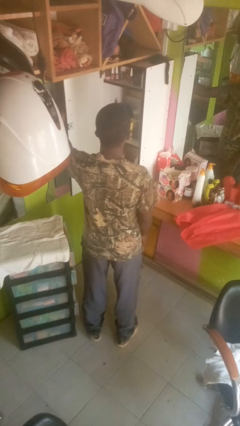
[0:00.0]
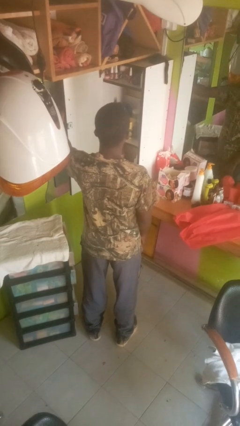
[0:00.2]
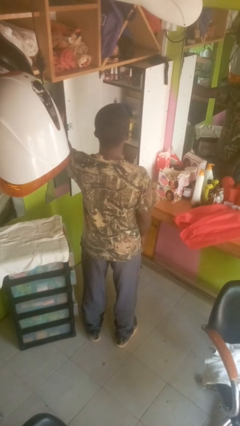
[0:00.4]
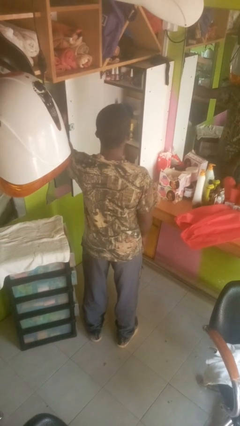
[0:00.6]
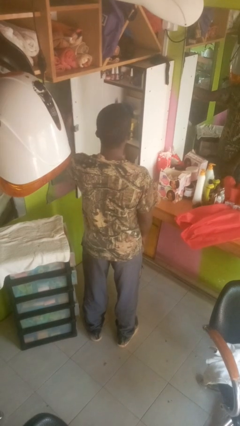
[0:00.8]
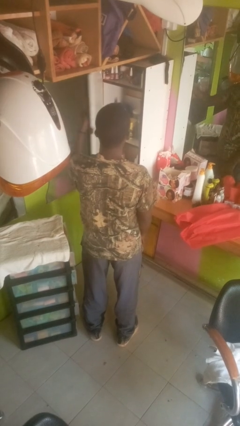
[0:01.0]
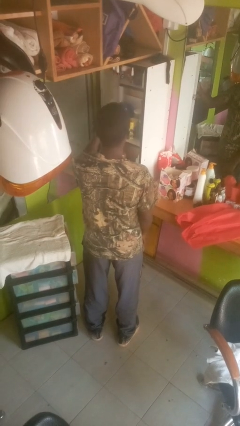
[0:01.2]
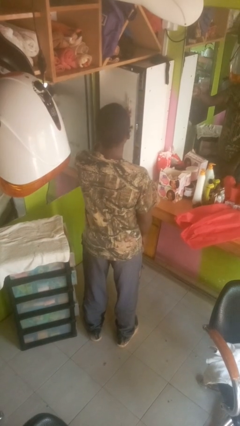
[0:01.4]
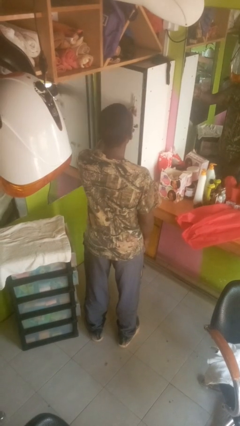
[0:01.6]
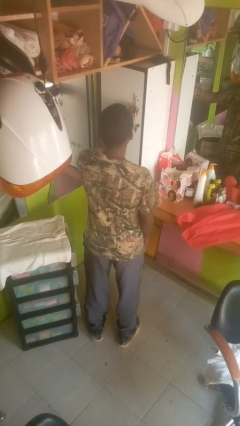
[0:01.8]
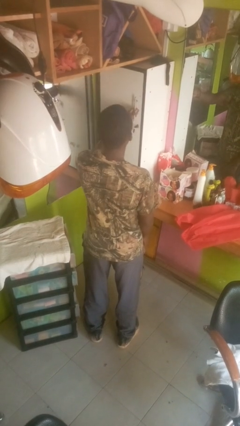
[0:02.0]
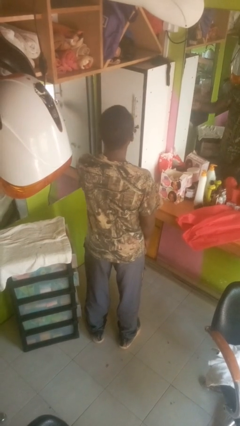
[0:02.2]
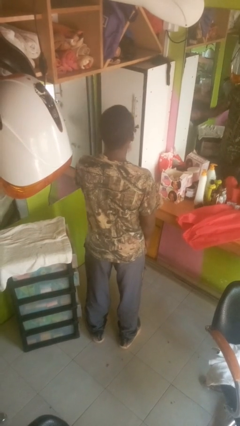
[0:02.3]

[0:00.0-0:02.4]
person closes closet door

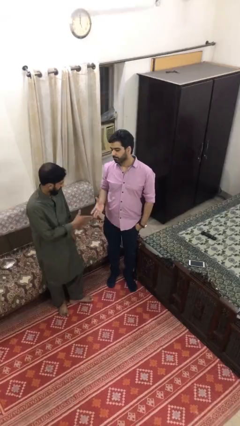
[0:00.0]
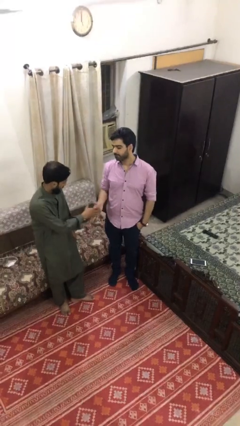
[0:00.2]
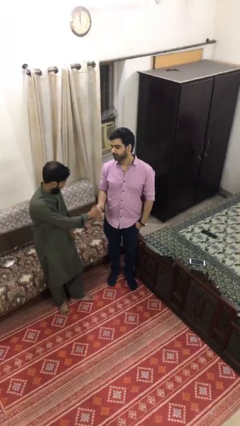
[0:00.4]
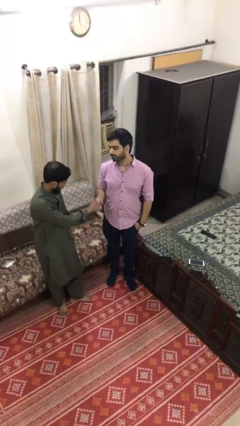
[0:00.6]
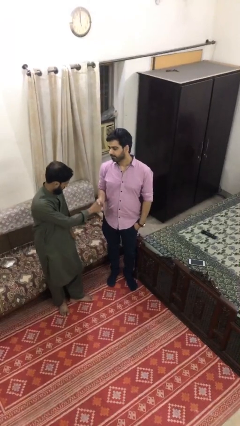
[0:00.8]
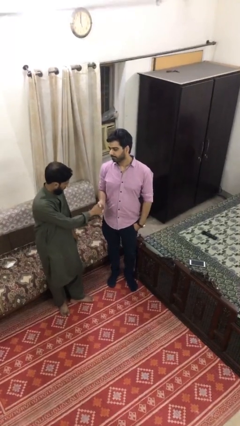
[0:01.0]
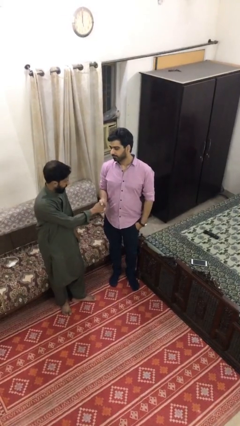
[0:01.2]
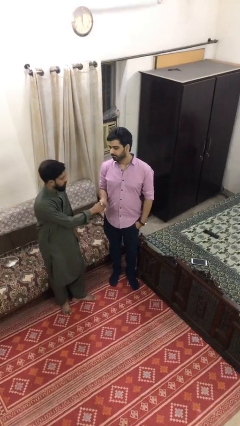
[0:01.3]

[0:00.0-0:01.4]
person shakes hand

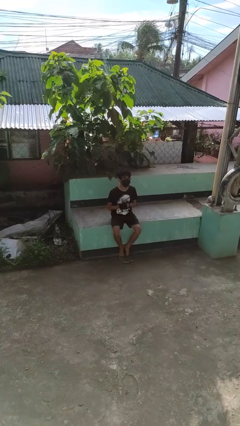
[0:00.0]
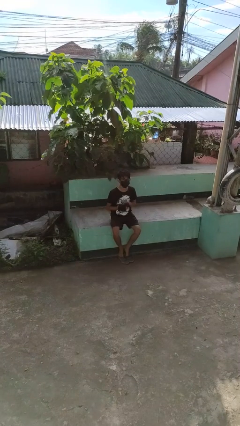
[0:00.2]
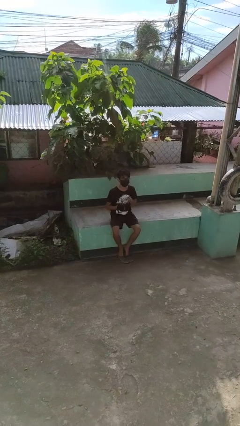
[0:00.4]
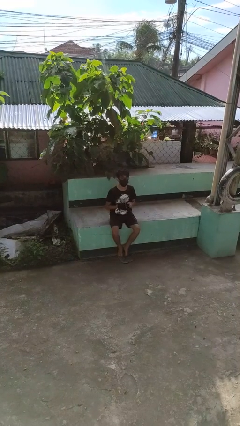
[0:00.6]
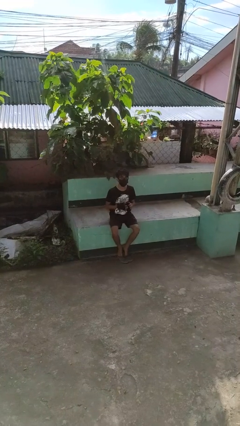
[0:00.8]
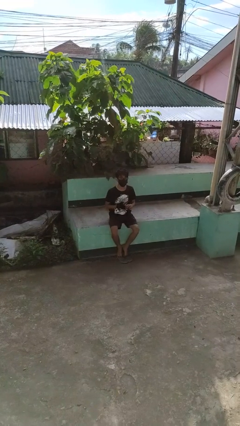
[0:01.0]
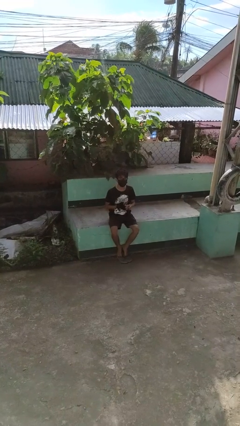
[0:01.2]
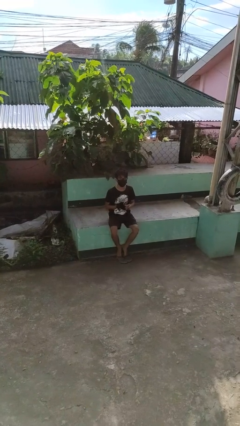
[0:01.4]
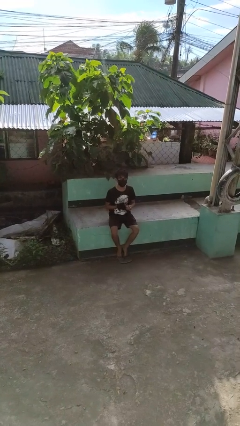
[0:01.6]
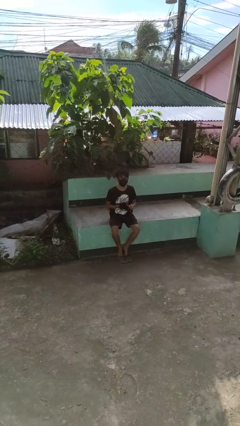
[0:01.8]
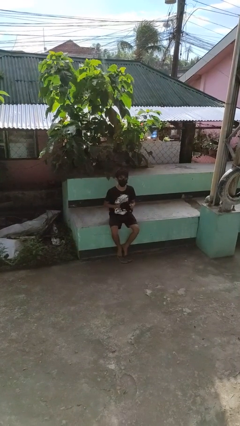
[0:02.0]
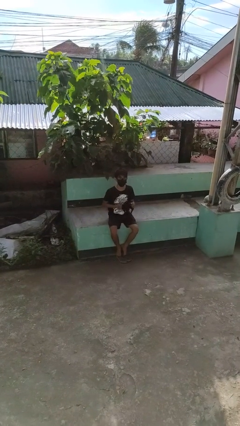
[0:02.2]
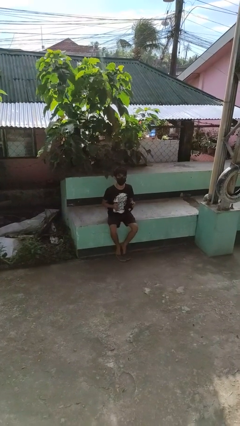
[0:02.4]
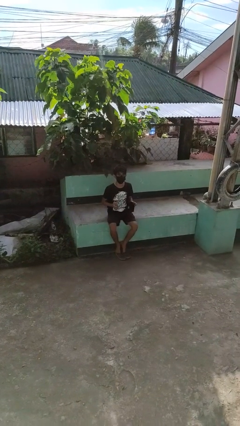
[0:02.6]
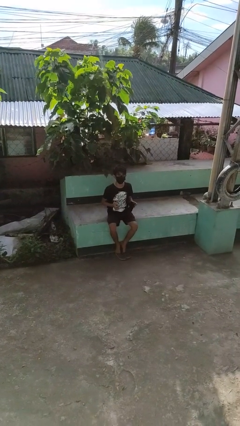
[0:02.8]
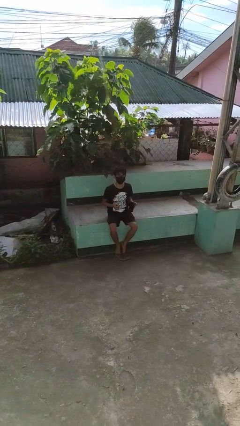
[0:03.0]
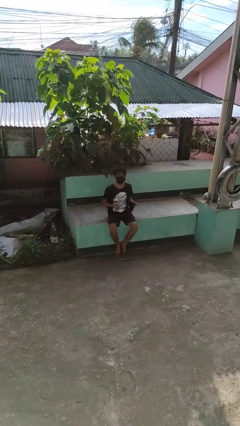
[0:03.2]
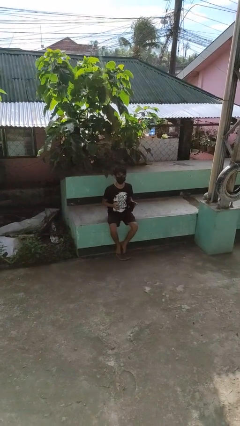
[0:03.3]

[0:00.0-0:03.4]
person takes off gloves

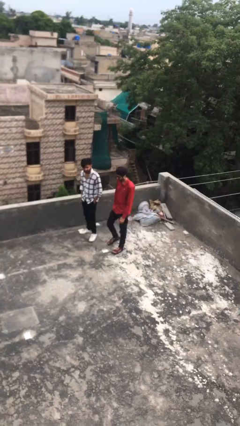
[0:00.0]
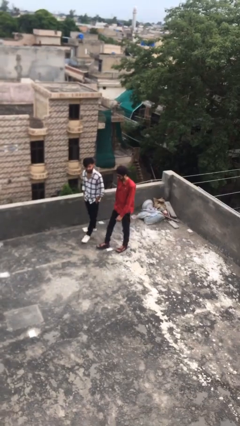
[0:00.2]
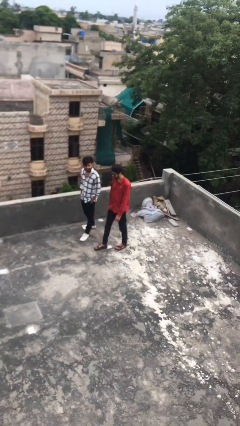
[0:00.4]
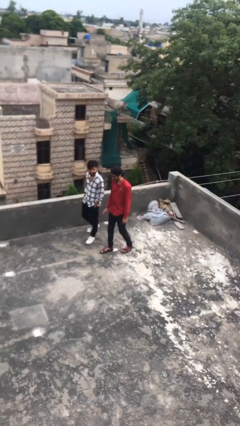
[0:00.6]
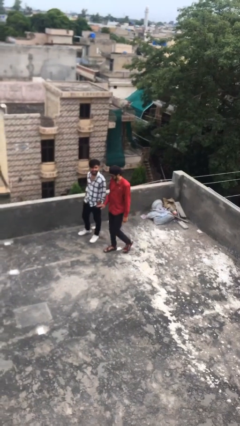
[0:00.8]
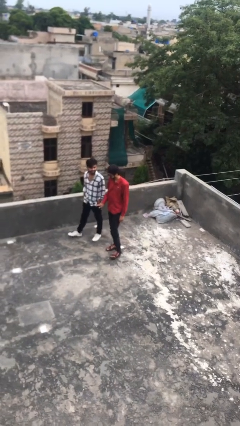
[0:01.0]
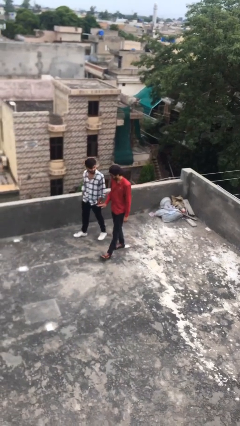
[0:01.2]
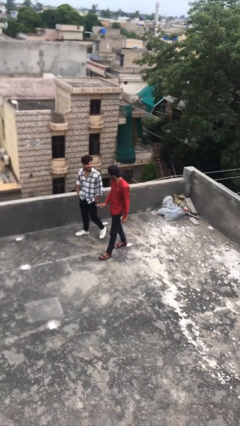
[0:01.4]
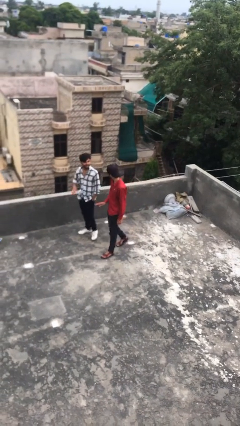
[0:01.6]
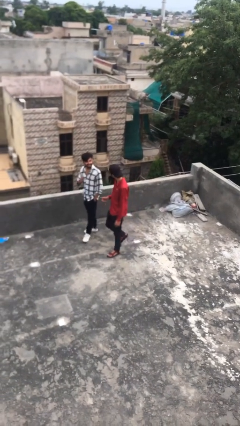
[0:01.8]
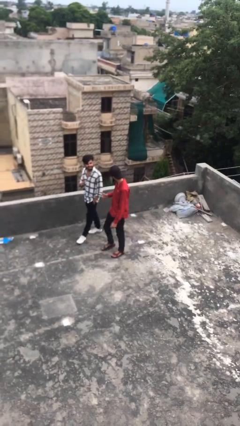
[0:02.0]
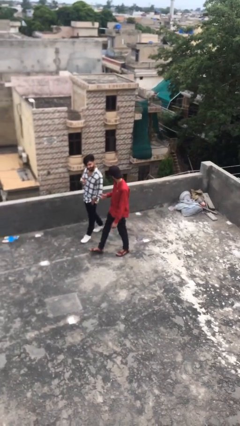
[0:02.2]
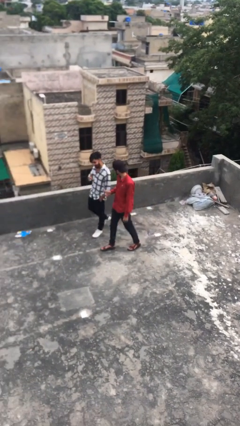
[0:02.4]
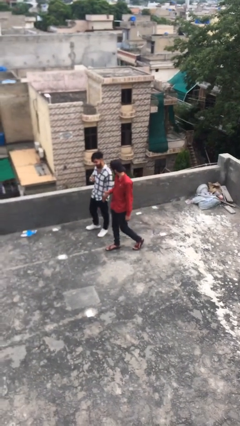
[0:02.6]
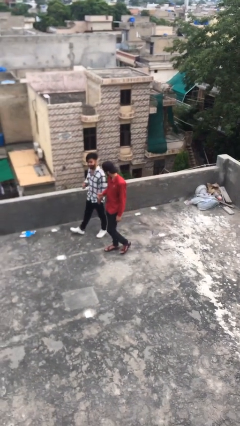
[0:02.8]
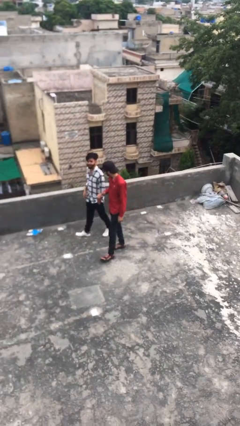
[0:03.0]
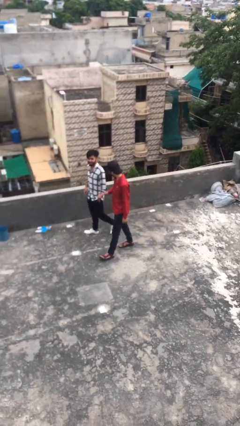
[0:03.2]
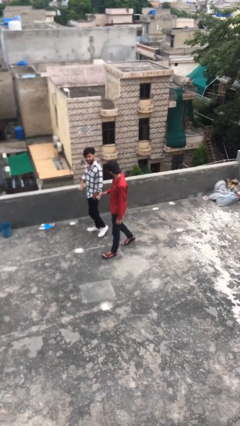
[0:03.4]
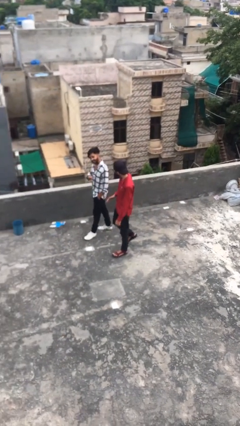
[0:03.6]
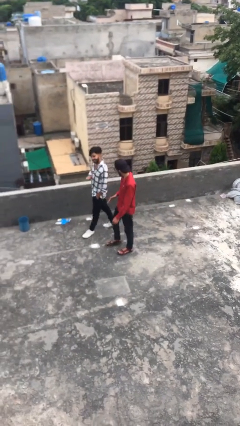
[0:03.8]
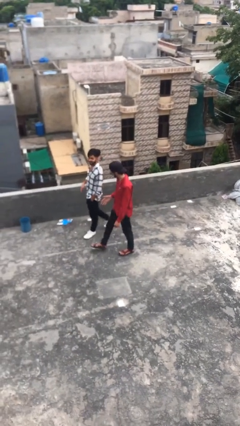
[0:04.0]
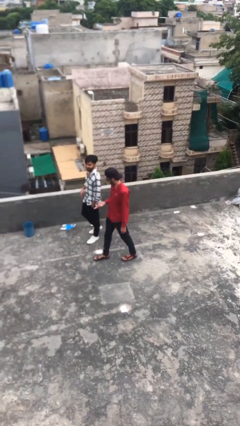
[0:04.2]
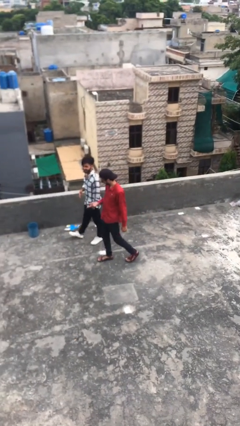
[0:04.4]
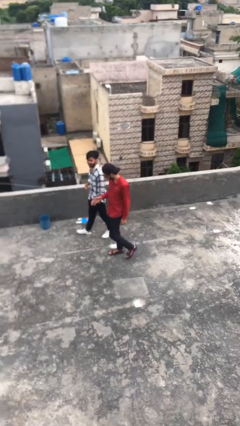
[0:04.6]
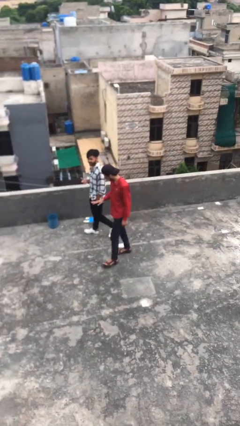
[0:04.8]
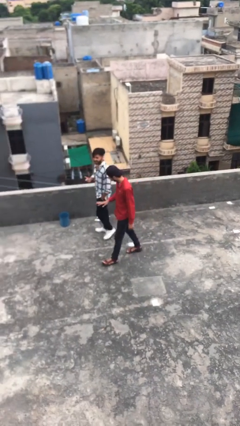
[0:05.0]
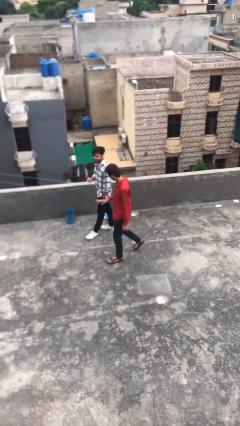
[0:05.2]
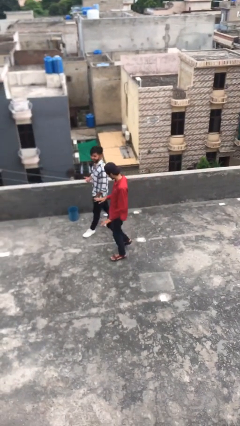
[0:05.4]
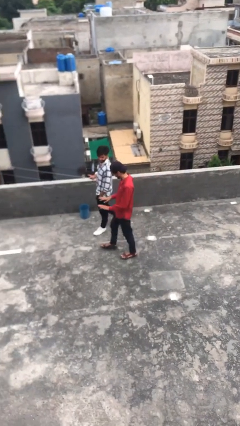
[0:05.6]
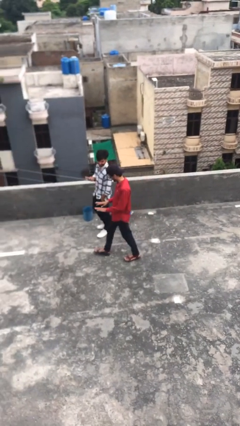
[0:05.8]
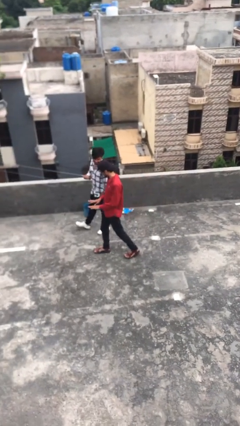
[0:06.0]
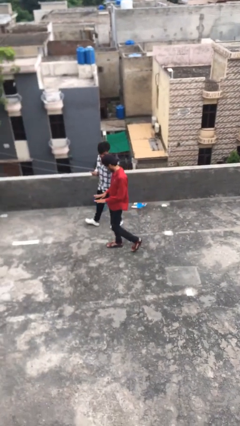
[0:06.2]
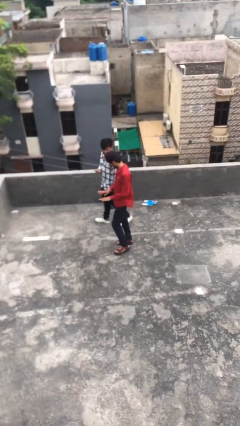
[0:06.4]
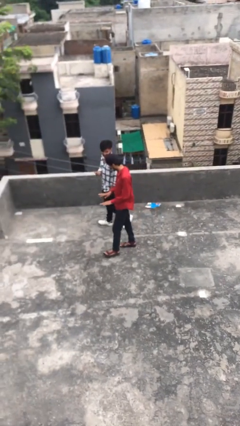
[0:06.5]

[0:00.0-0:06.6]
person talks to person

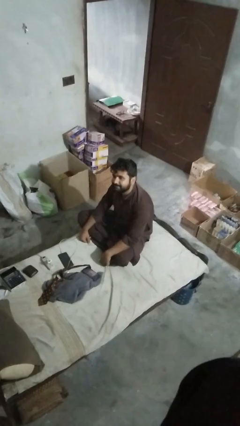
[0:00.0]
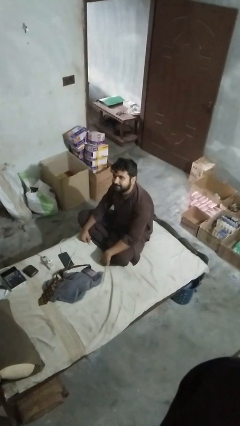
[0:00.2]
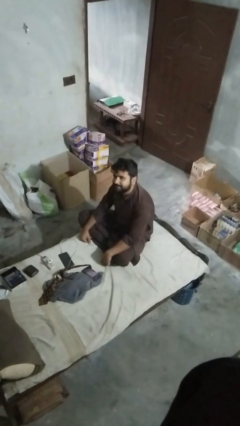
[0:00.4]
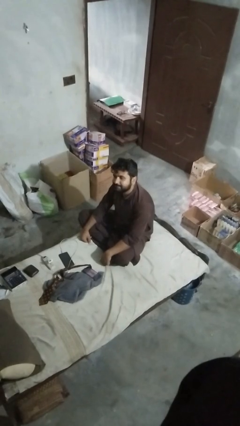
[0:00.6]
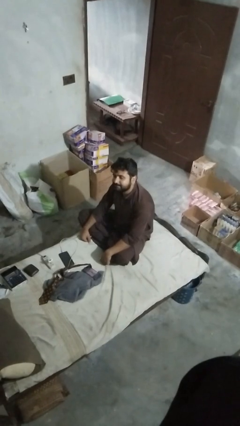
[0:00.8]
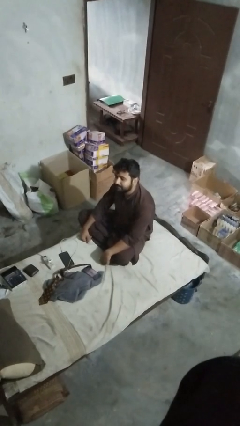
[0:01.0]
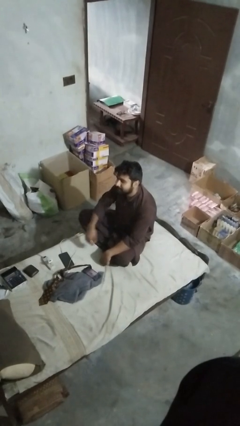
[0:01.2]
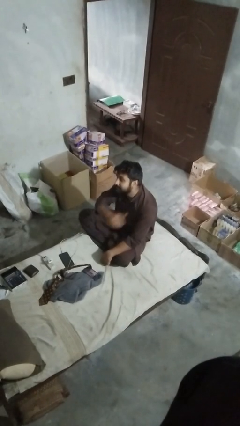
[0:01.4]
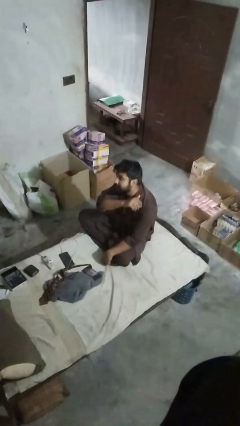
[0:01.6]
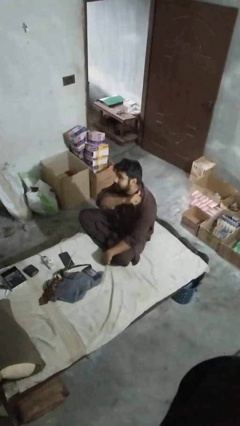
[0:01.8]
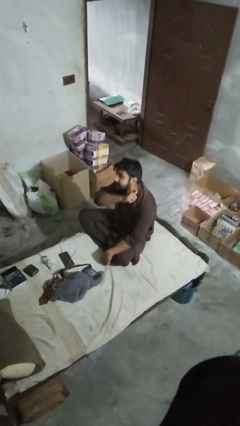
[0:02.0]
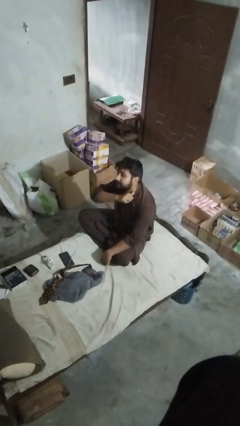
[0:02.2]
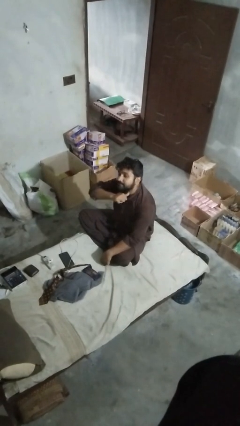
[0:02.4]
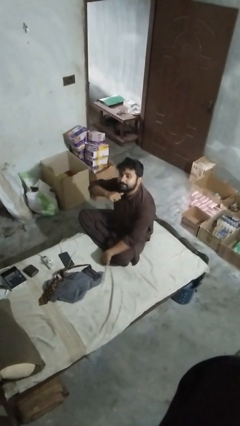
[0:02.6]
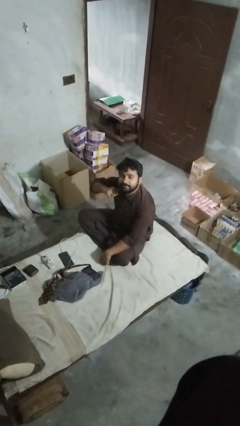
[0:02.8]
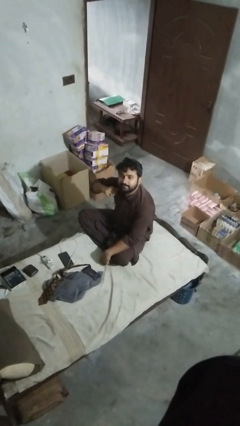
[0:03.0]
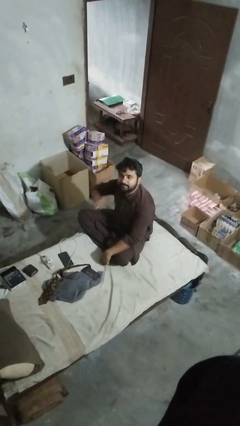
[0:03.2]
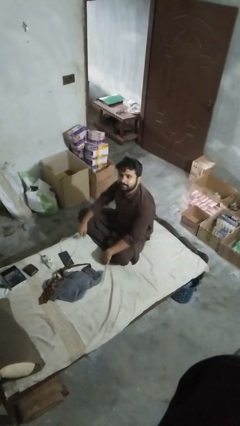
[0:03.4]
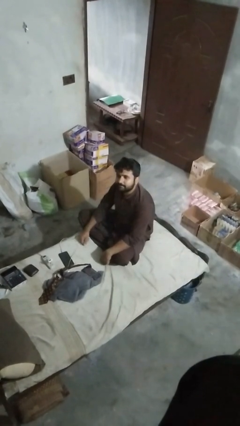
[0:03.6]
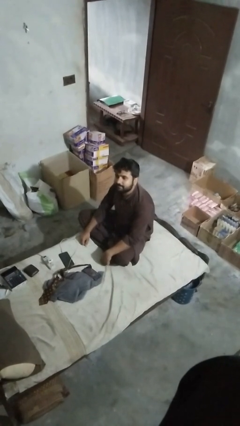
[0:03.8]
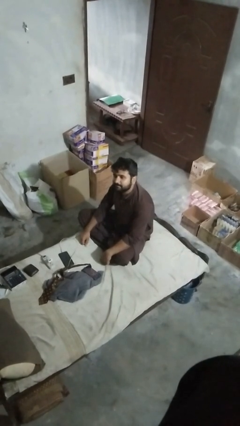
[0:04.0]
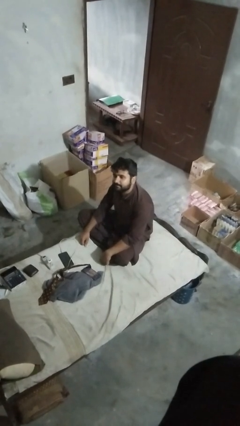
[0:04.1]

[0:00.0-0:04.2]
person gestures cut
